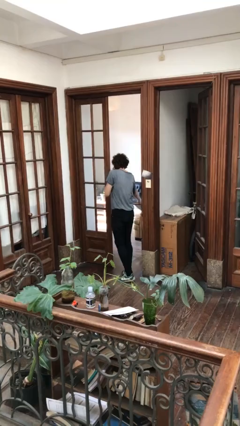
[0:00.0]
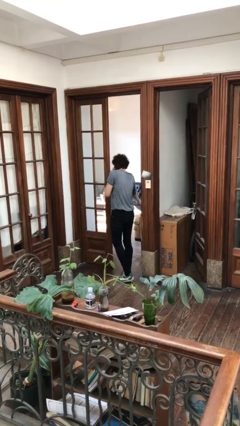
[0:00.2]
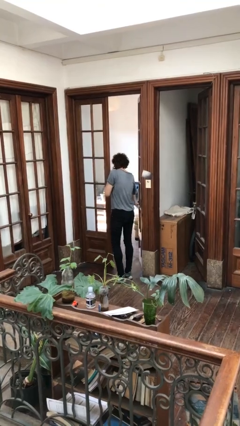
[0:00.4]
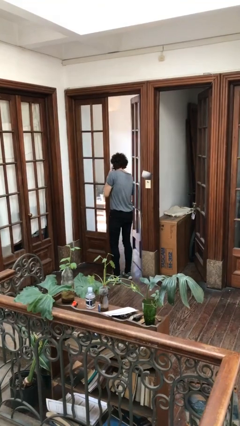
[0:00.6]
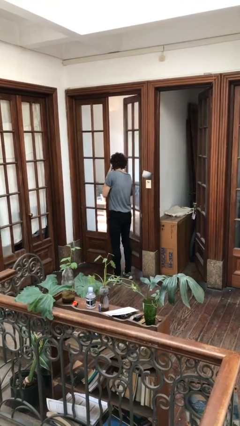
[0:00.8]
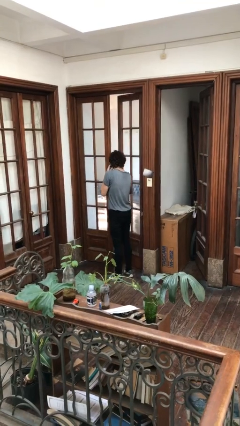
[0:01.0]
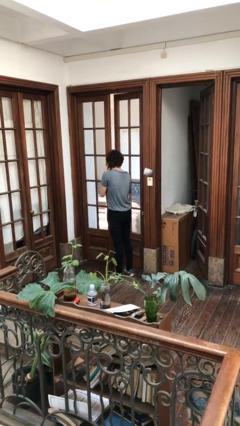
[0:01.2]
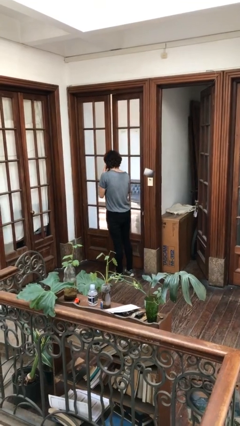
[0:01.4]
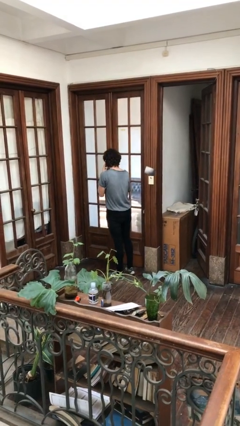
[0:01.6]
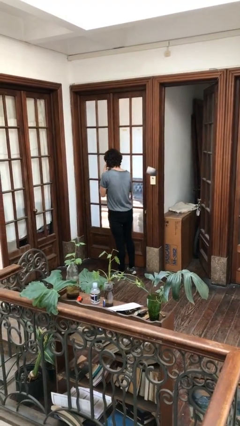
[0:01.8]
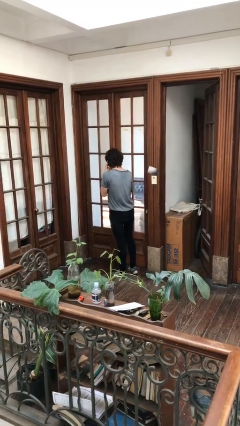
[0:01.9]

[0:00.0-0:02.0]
person closes facility door

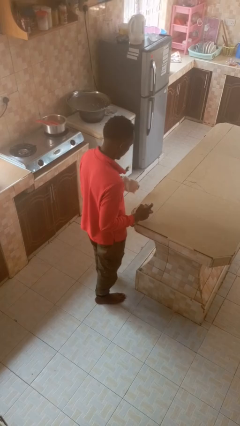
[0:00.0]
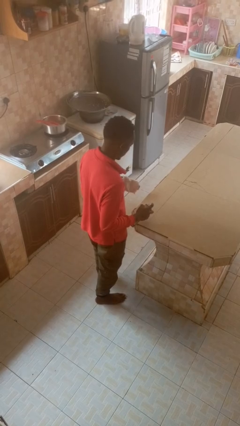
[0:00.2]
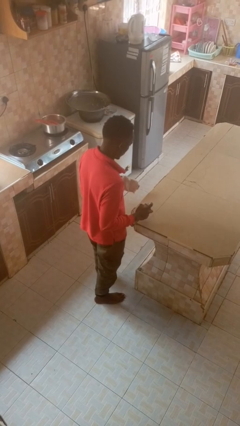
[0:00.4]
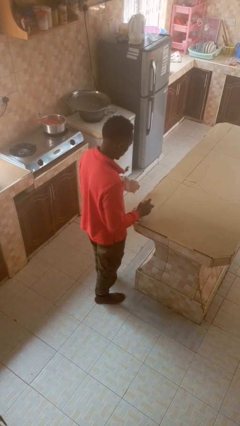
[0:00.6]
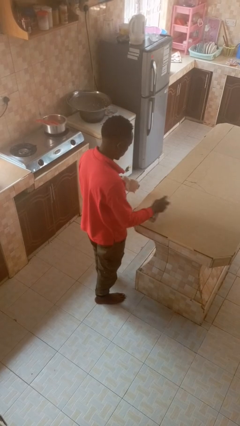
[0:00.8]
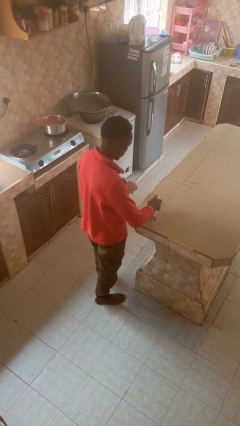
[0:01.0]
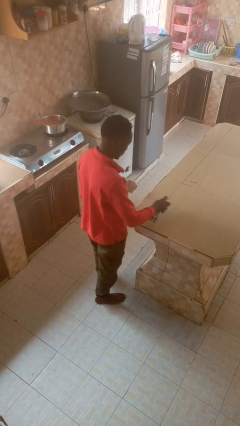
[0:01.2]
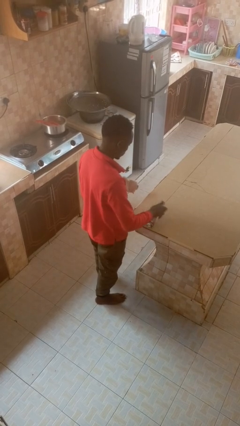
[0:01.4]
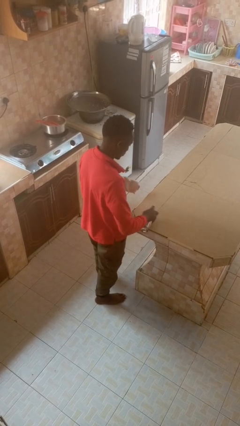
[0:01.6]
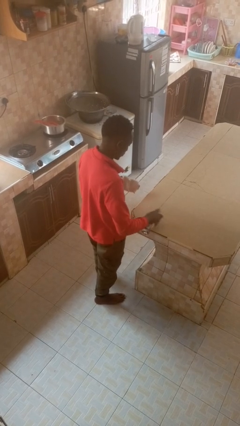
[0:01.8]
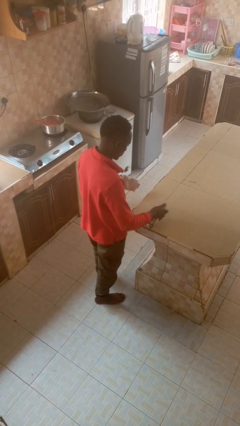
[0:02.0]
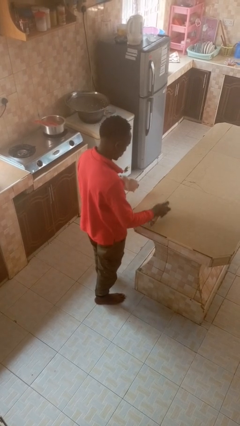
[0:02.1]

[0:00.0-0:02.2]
person sprays from bottle

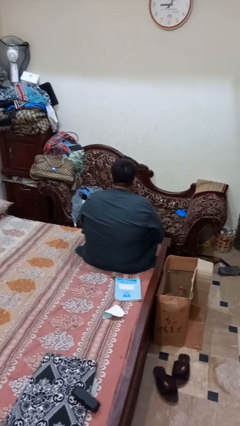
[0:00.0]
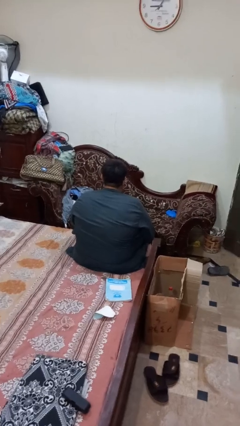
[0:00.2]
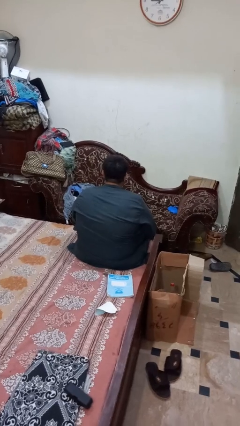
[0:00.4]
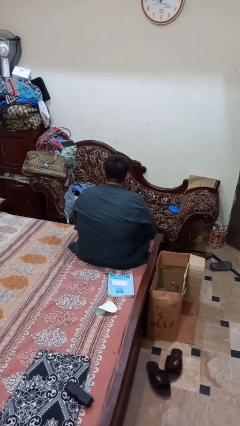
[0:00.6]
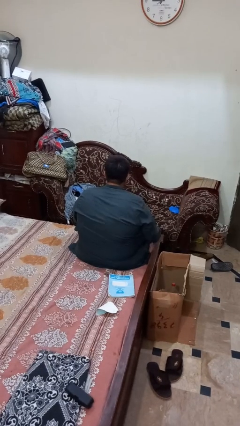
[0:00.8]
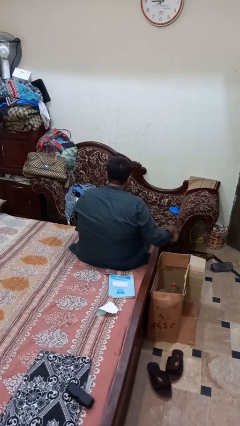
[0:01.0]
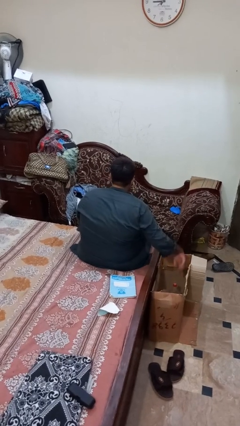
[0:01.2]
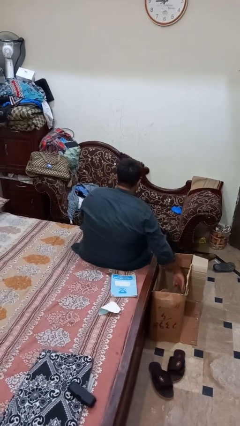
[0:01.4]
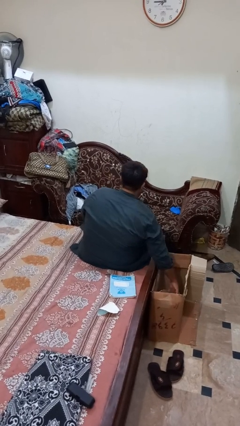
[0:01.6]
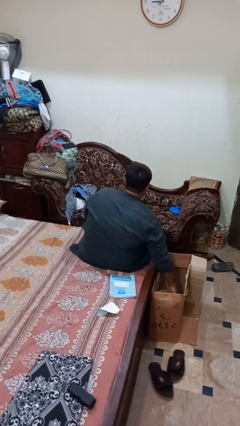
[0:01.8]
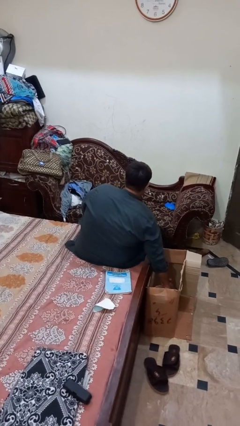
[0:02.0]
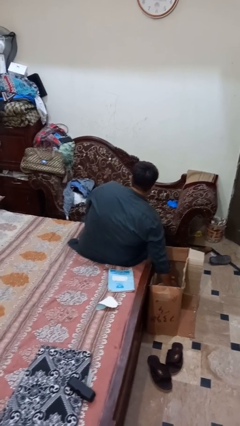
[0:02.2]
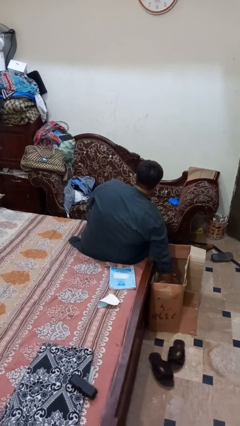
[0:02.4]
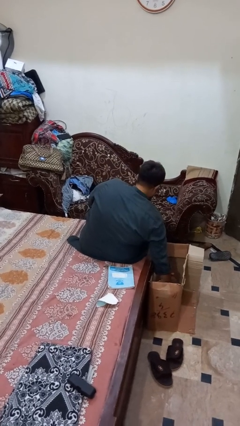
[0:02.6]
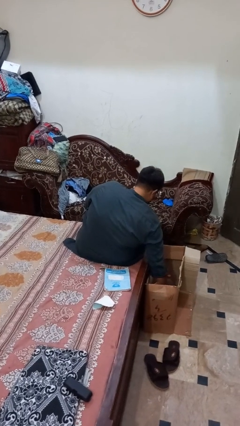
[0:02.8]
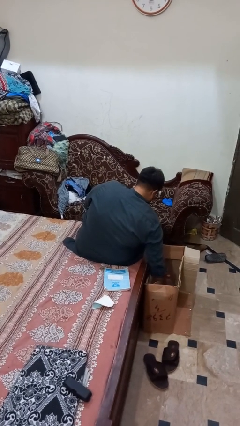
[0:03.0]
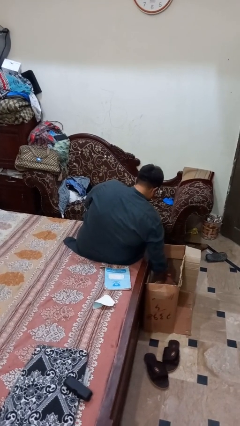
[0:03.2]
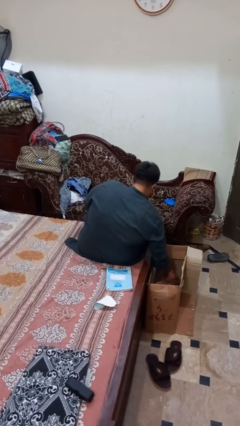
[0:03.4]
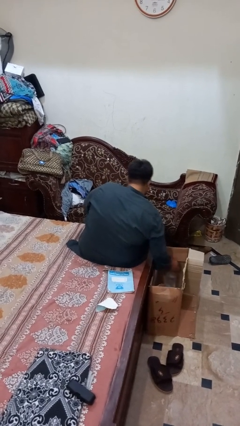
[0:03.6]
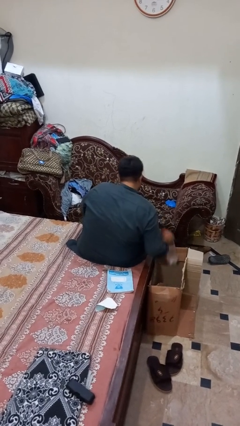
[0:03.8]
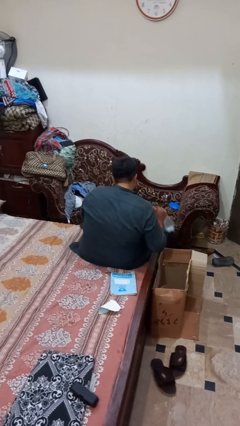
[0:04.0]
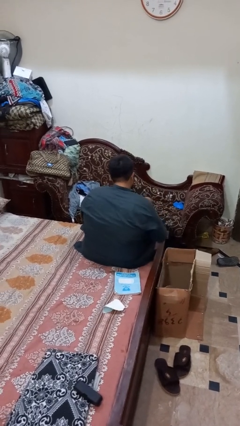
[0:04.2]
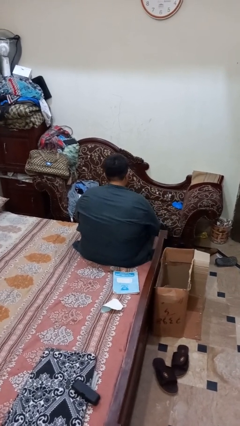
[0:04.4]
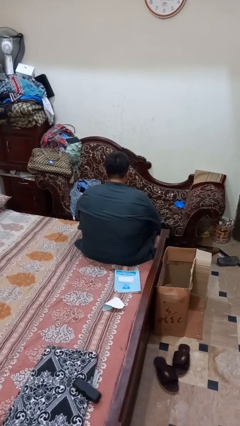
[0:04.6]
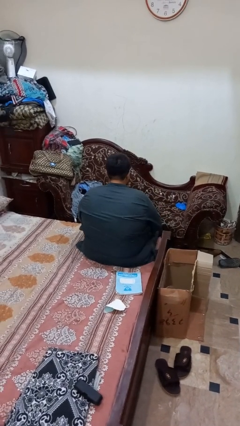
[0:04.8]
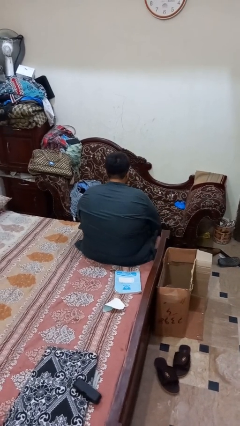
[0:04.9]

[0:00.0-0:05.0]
person takes object from box

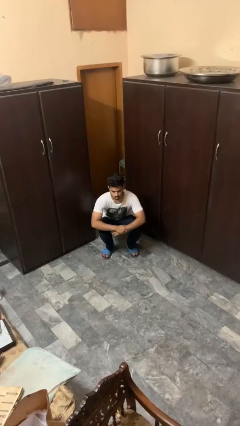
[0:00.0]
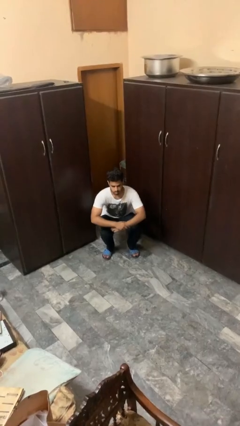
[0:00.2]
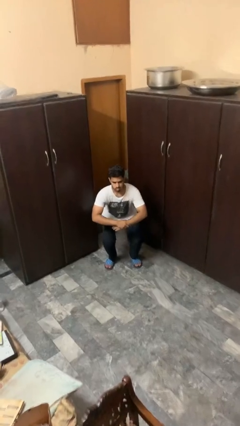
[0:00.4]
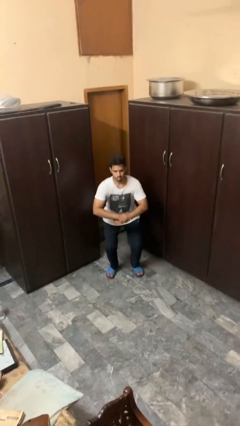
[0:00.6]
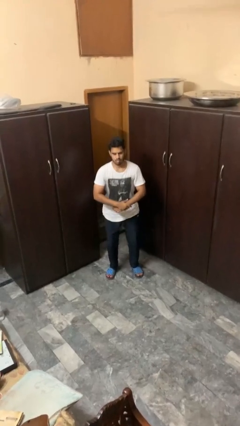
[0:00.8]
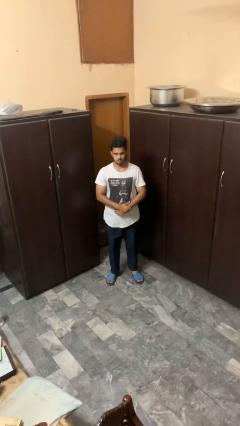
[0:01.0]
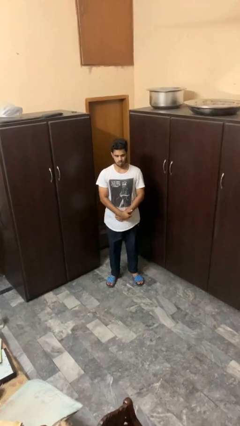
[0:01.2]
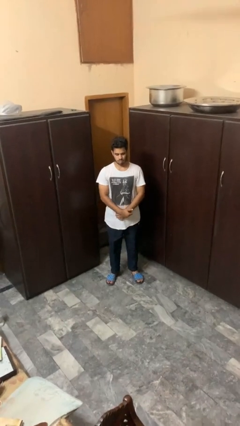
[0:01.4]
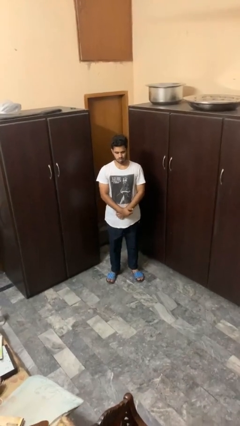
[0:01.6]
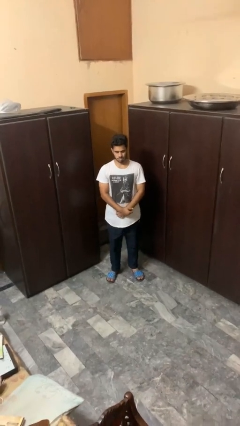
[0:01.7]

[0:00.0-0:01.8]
person stands up

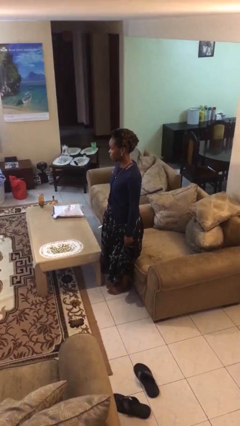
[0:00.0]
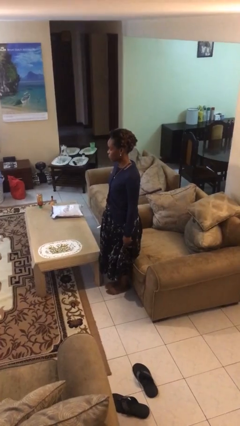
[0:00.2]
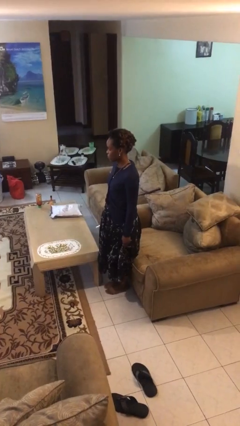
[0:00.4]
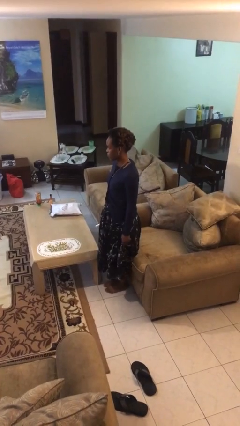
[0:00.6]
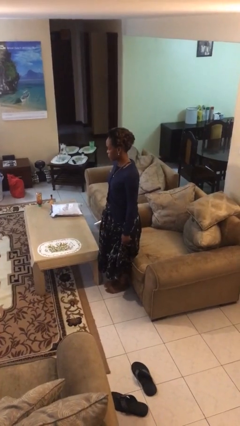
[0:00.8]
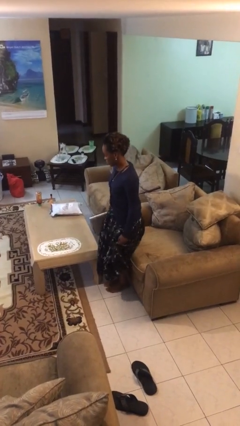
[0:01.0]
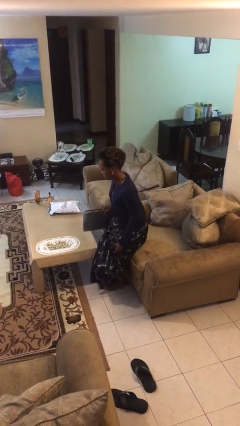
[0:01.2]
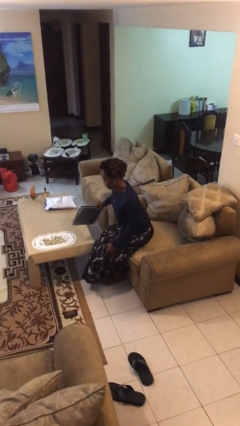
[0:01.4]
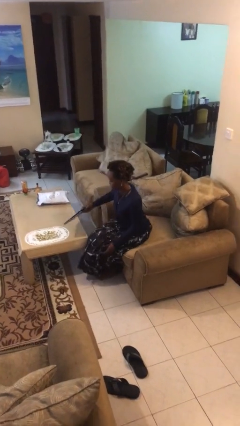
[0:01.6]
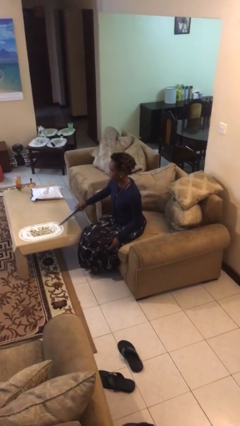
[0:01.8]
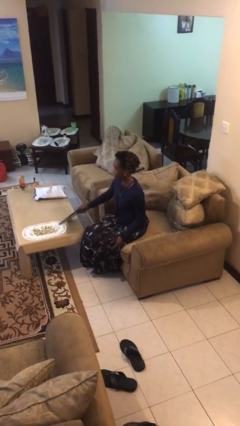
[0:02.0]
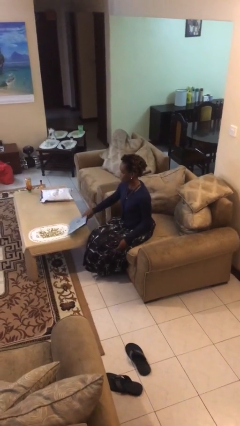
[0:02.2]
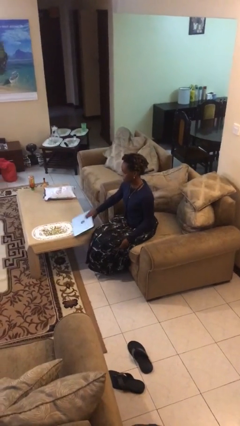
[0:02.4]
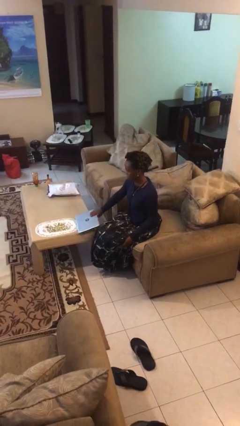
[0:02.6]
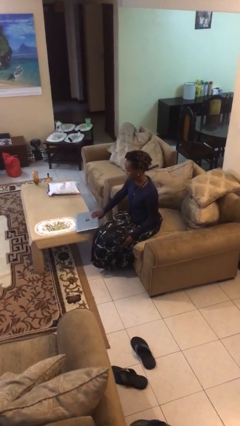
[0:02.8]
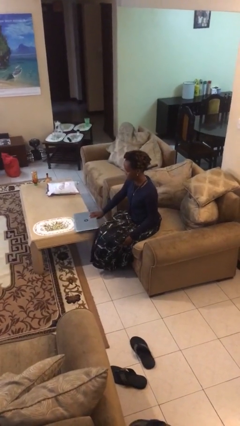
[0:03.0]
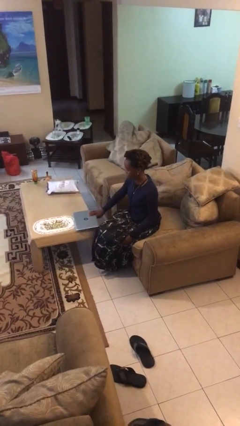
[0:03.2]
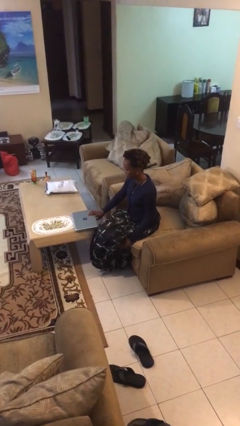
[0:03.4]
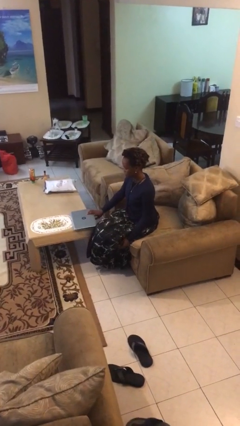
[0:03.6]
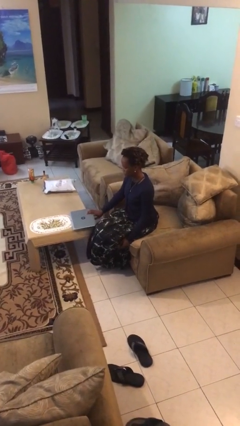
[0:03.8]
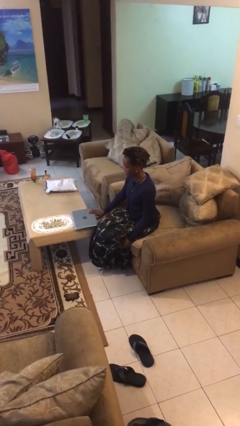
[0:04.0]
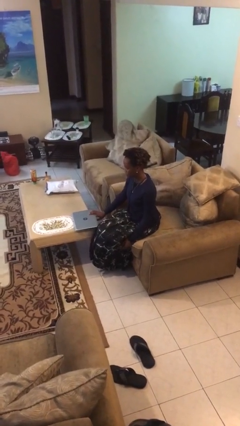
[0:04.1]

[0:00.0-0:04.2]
person sits down

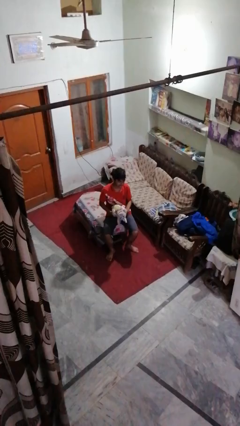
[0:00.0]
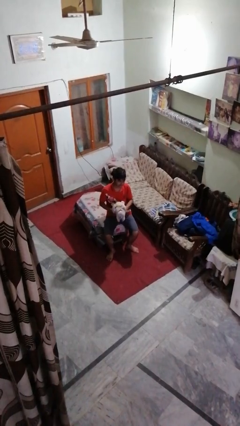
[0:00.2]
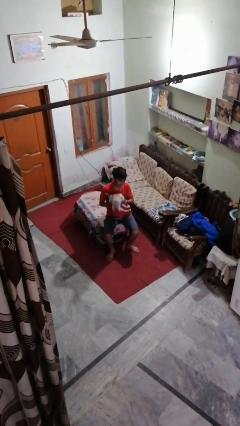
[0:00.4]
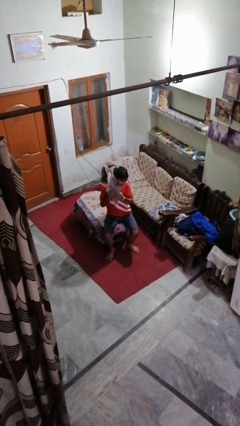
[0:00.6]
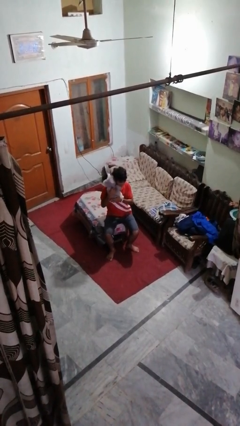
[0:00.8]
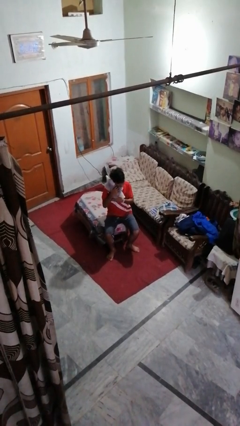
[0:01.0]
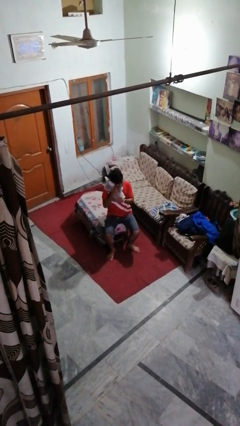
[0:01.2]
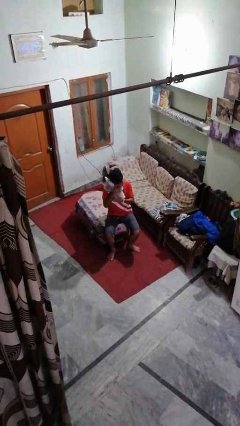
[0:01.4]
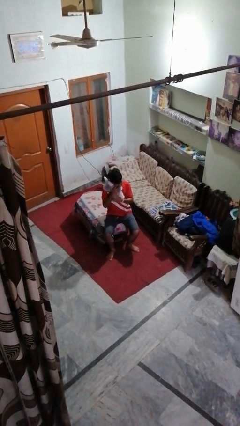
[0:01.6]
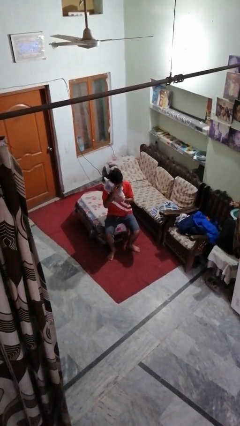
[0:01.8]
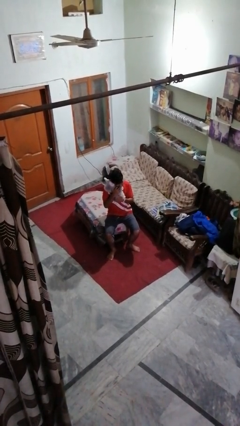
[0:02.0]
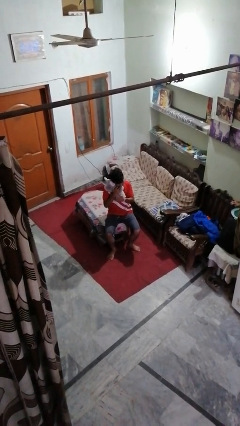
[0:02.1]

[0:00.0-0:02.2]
person hugs stuffed animal
